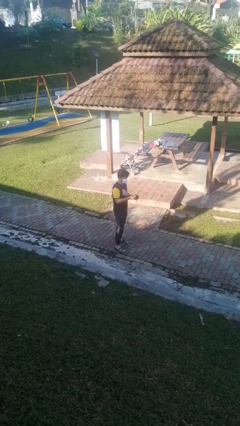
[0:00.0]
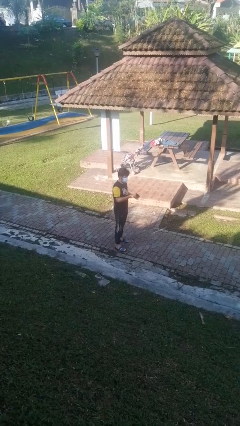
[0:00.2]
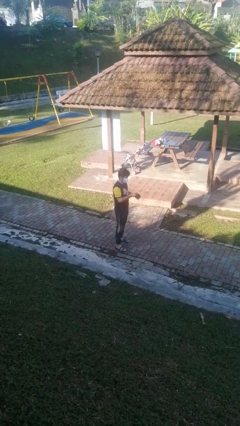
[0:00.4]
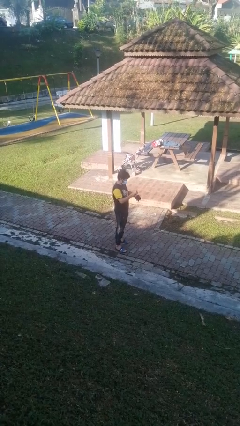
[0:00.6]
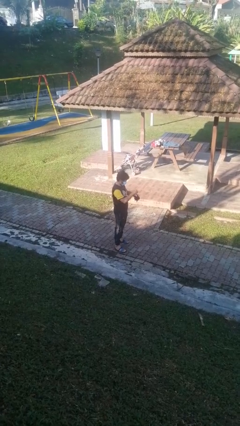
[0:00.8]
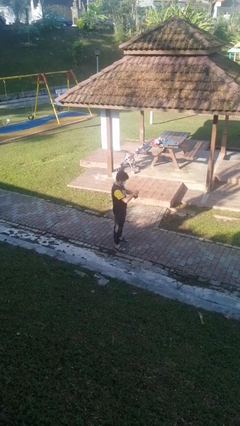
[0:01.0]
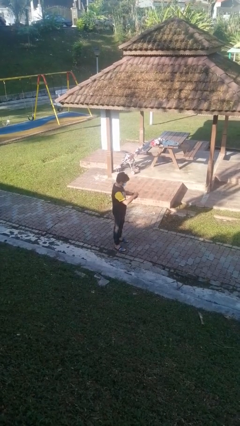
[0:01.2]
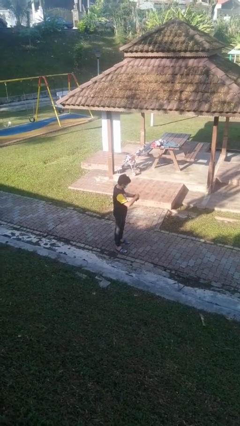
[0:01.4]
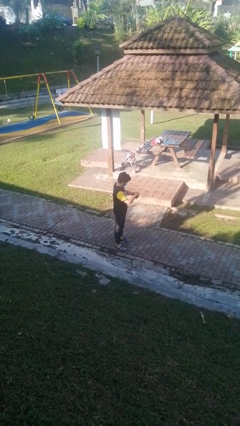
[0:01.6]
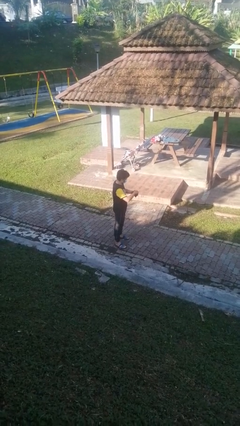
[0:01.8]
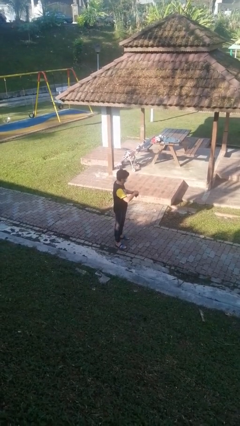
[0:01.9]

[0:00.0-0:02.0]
person puts object into purse

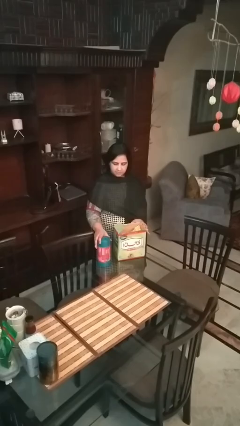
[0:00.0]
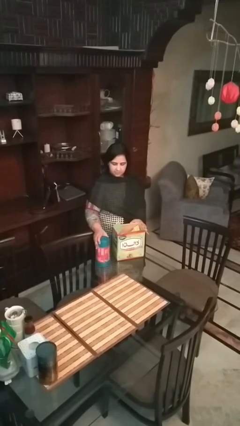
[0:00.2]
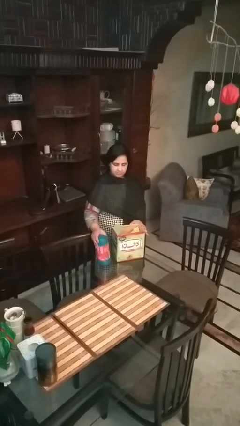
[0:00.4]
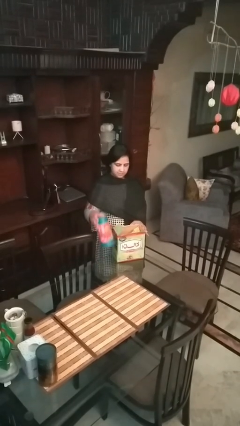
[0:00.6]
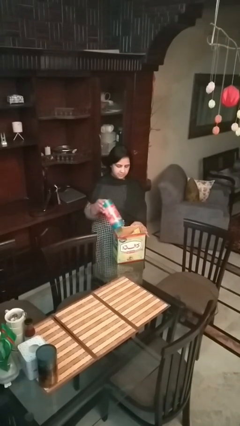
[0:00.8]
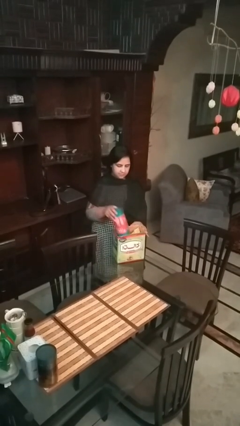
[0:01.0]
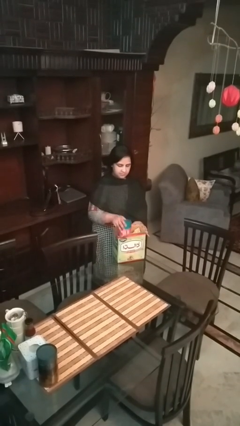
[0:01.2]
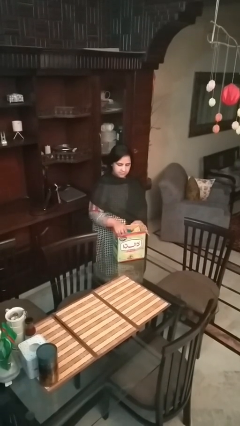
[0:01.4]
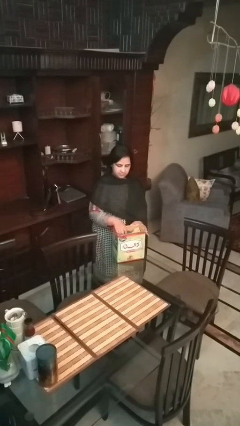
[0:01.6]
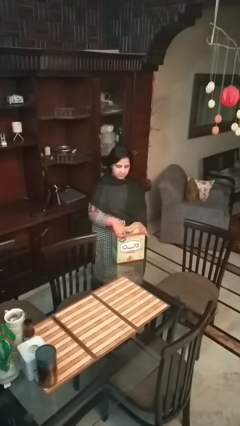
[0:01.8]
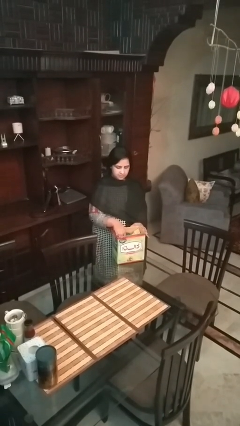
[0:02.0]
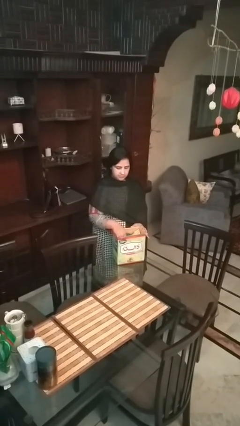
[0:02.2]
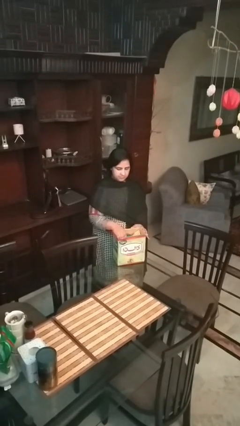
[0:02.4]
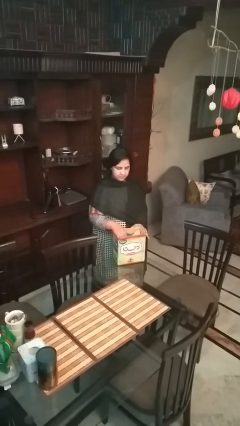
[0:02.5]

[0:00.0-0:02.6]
person puts object into box

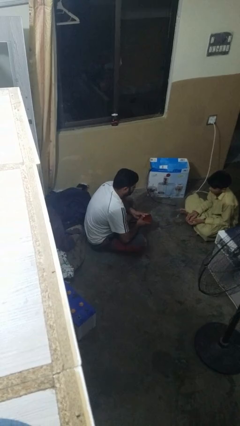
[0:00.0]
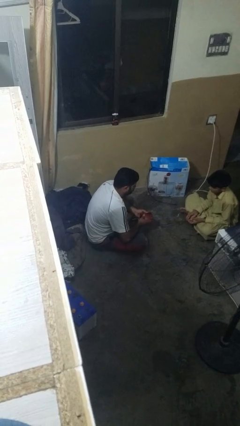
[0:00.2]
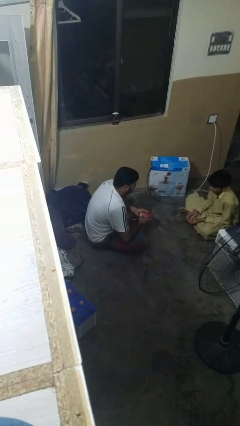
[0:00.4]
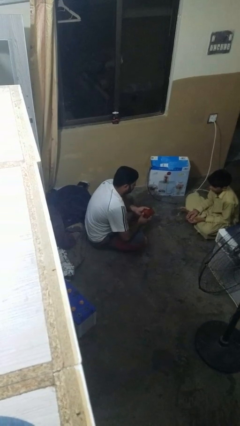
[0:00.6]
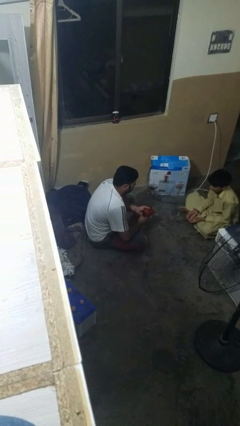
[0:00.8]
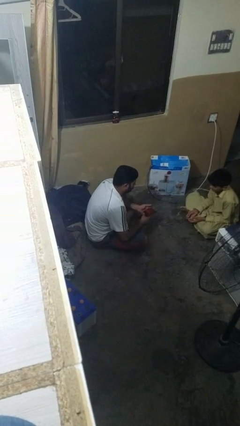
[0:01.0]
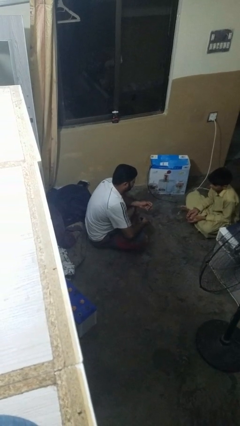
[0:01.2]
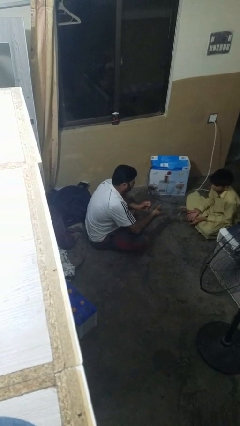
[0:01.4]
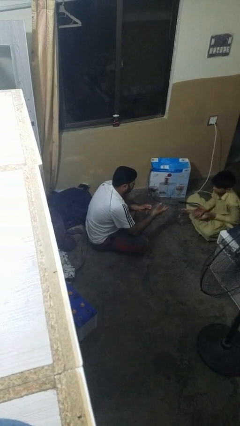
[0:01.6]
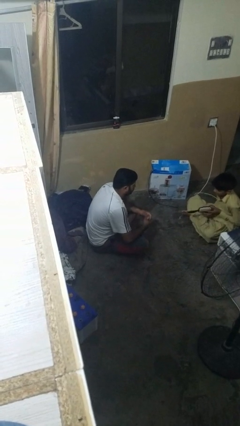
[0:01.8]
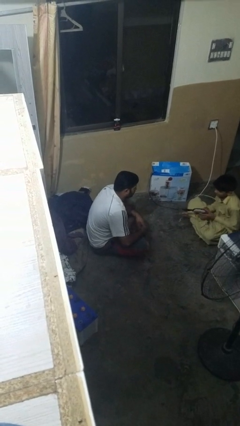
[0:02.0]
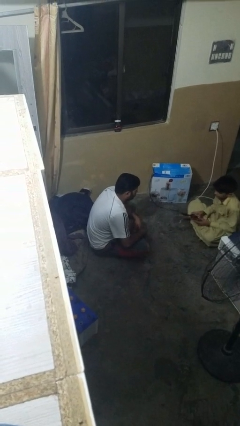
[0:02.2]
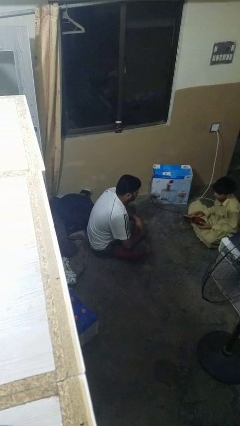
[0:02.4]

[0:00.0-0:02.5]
person throws object to person

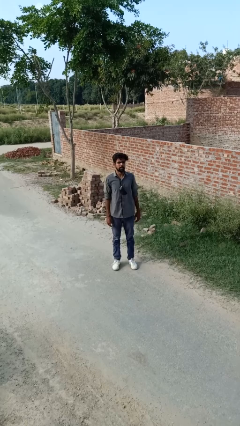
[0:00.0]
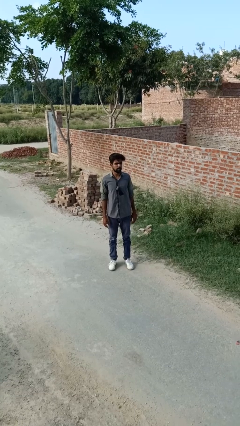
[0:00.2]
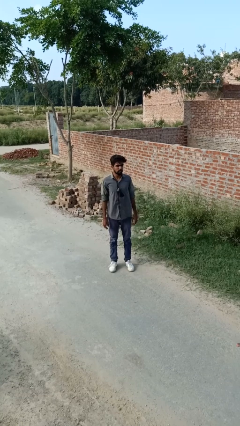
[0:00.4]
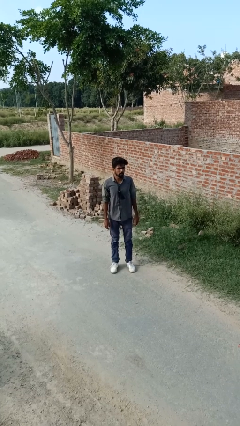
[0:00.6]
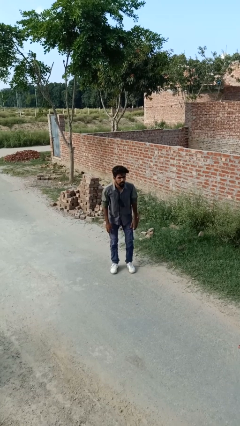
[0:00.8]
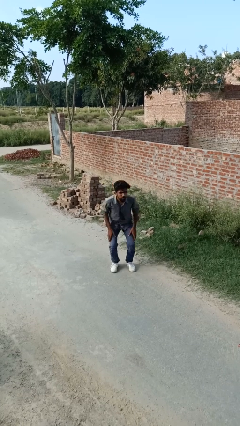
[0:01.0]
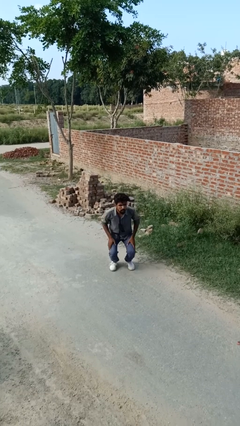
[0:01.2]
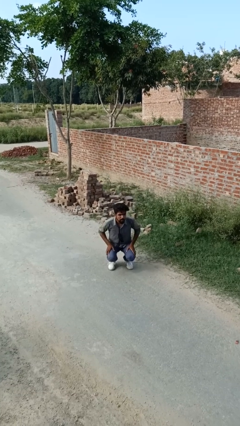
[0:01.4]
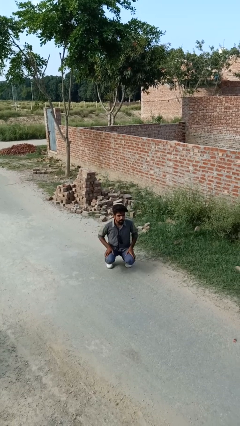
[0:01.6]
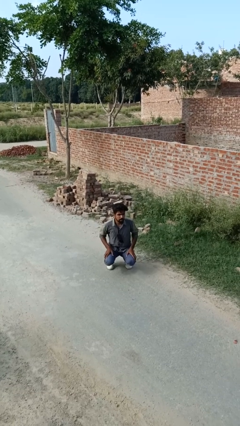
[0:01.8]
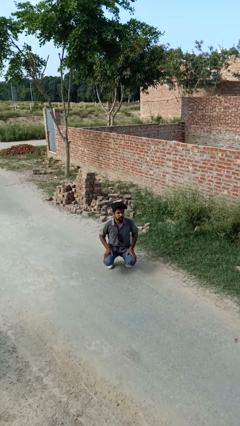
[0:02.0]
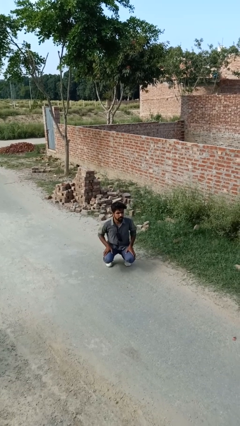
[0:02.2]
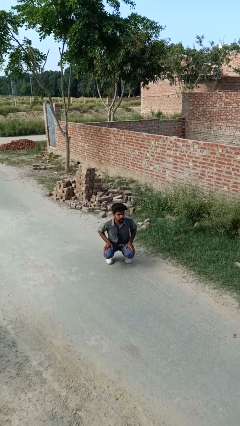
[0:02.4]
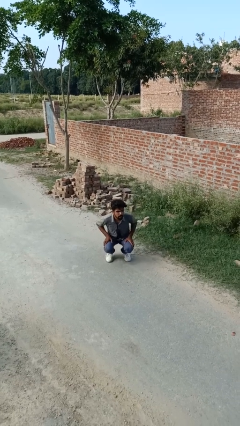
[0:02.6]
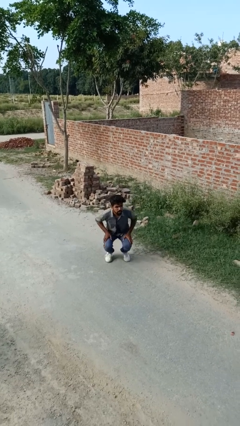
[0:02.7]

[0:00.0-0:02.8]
person kneels

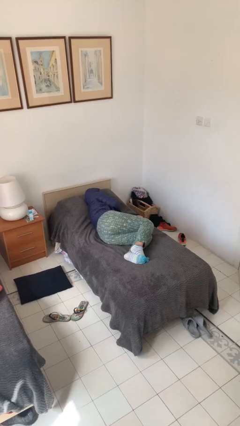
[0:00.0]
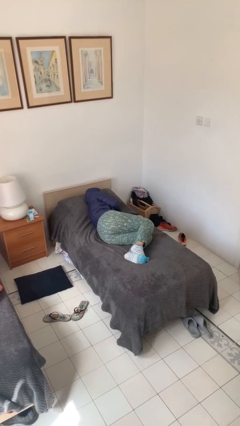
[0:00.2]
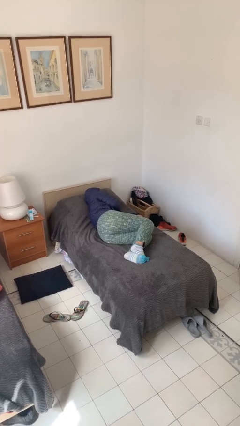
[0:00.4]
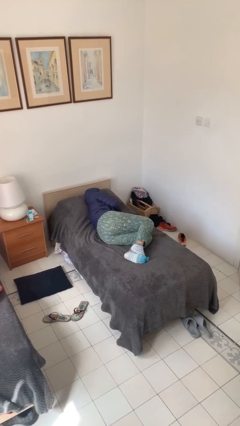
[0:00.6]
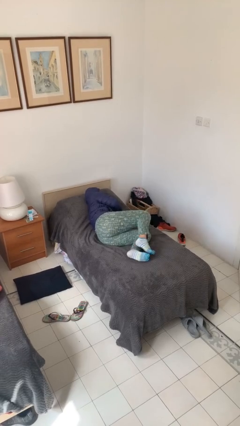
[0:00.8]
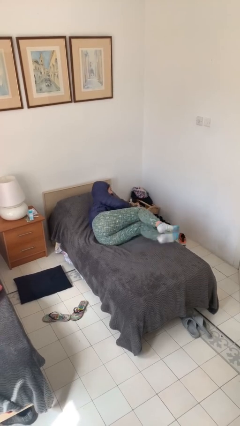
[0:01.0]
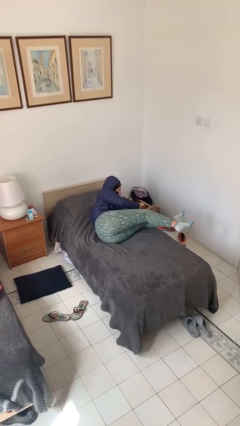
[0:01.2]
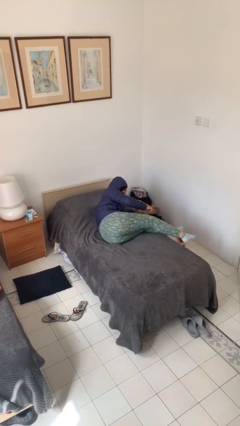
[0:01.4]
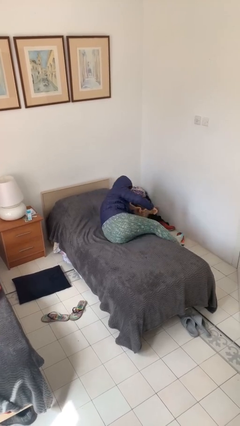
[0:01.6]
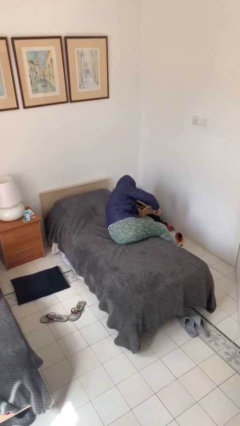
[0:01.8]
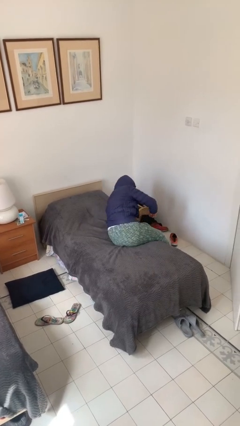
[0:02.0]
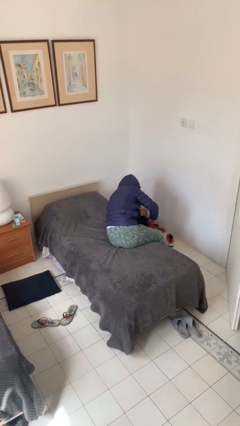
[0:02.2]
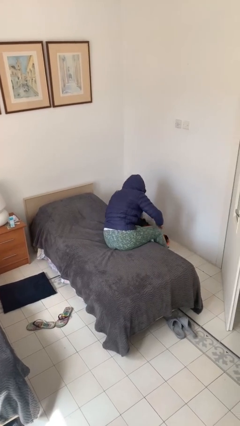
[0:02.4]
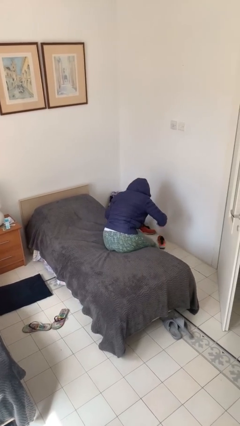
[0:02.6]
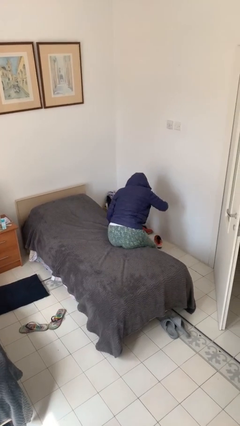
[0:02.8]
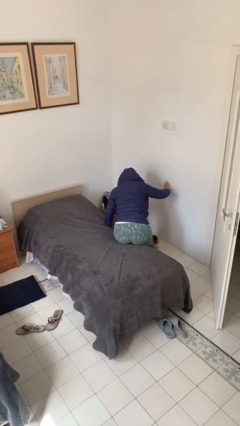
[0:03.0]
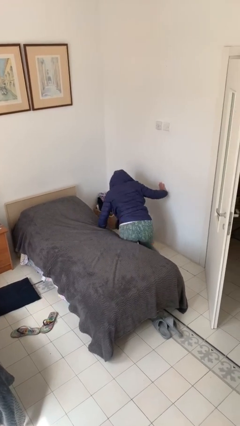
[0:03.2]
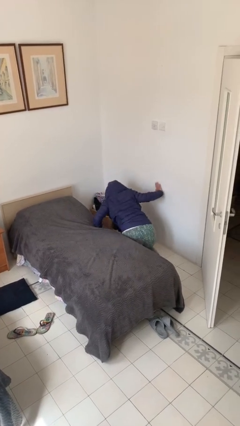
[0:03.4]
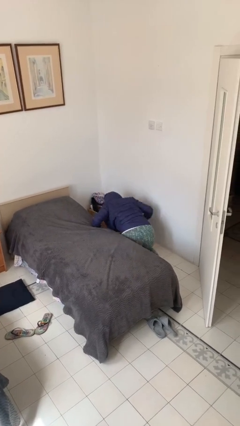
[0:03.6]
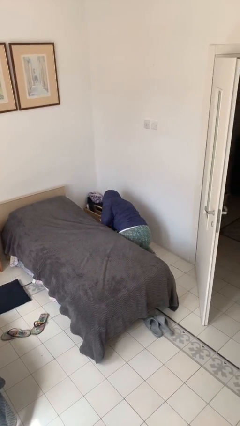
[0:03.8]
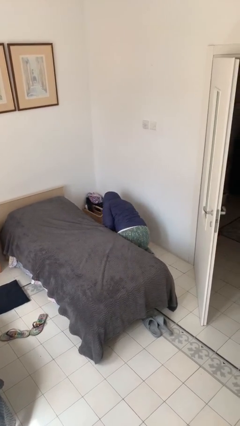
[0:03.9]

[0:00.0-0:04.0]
person stands up from floor

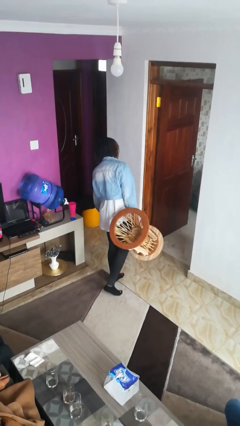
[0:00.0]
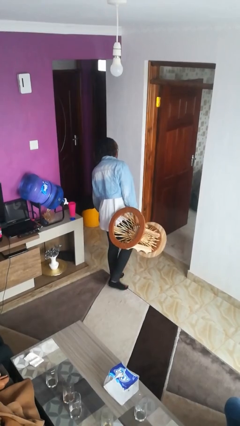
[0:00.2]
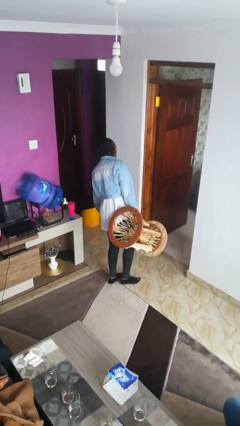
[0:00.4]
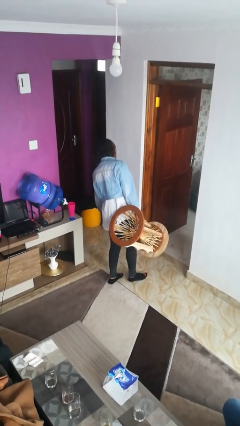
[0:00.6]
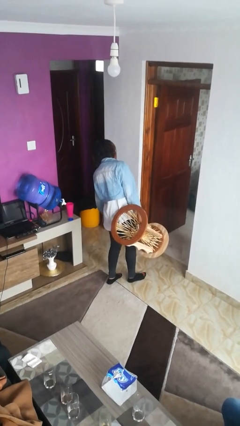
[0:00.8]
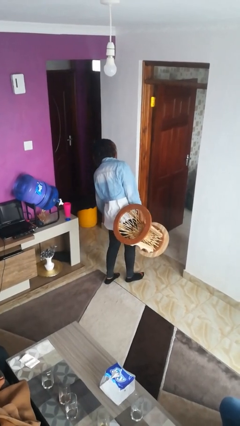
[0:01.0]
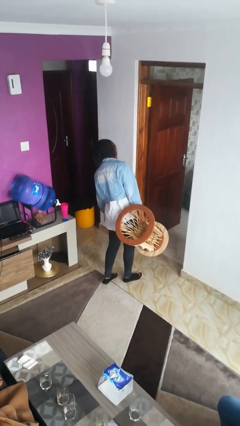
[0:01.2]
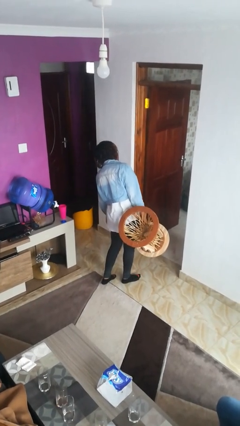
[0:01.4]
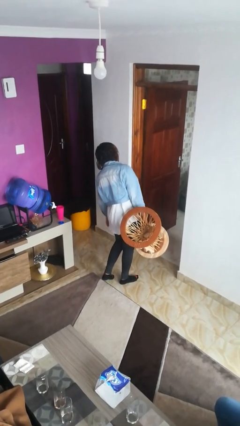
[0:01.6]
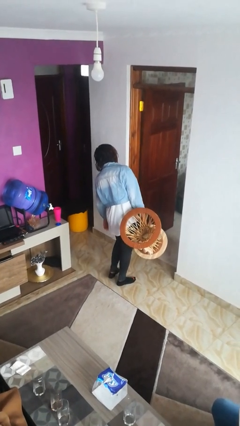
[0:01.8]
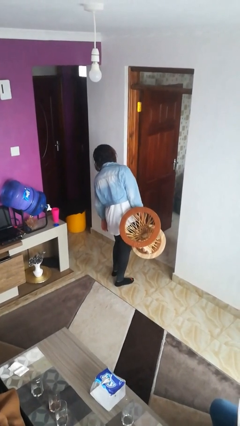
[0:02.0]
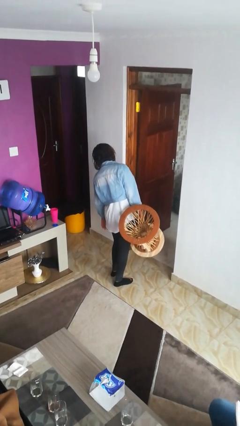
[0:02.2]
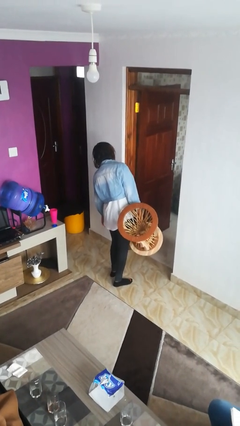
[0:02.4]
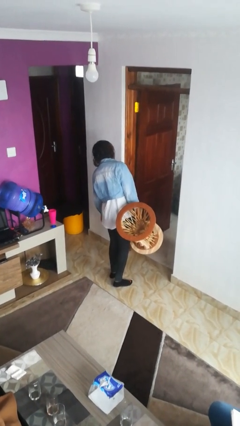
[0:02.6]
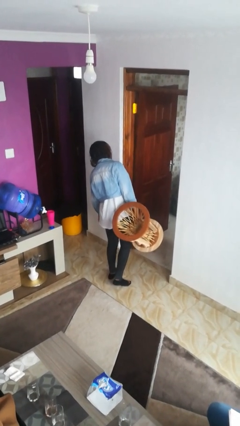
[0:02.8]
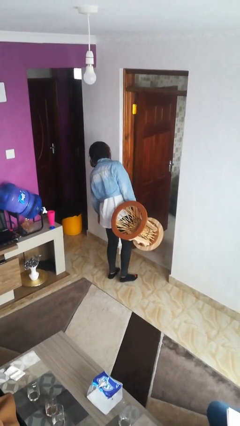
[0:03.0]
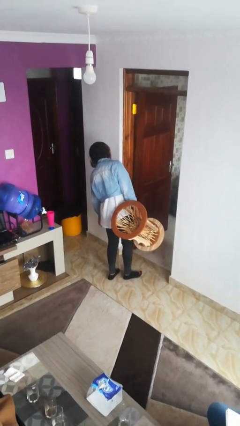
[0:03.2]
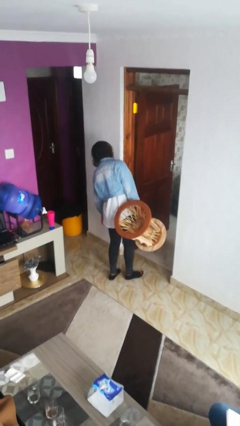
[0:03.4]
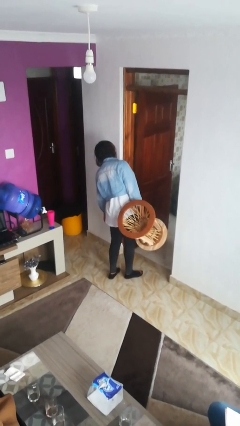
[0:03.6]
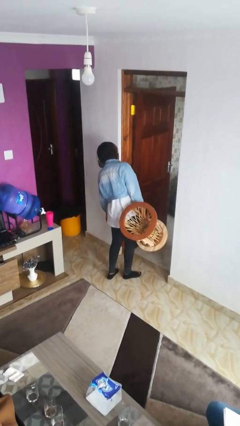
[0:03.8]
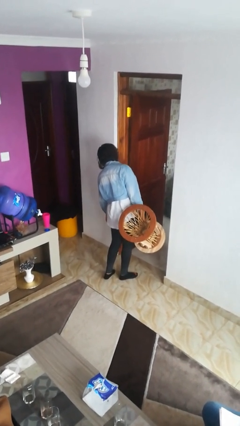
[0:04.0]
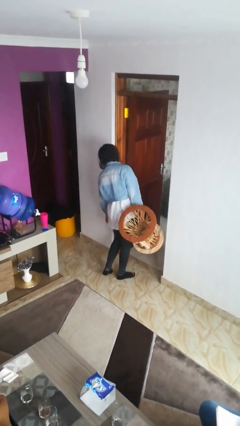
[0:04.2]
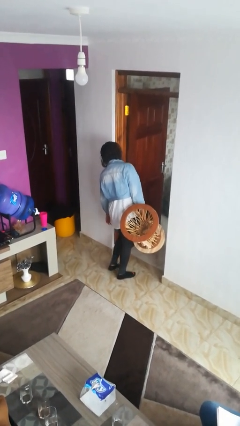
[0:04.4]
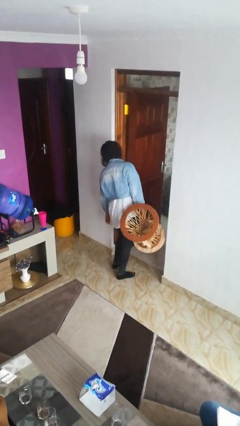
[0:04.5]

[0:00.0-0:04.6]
person carries furniture
